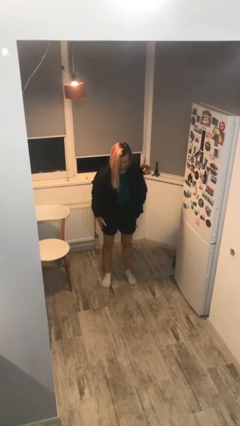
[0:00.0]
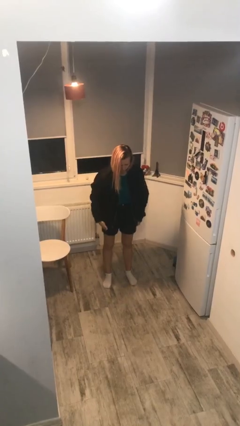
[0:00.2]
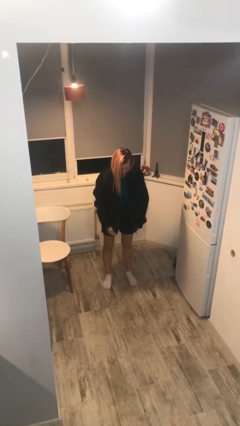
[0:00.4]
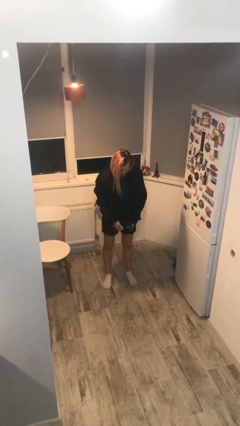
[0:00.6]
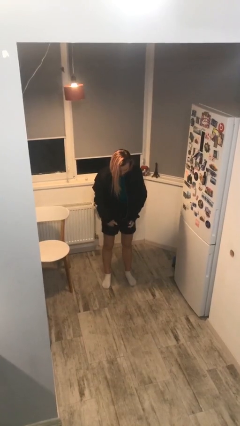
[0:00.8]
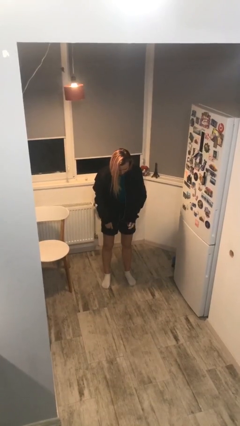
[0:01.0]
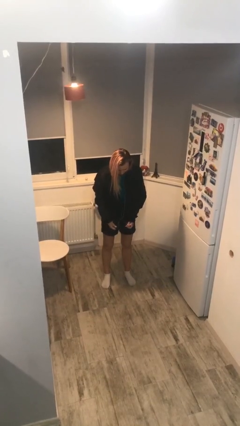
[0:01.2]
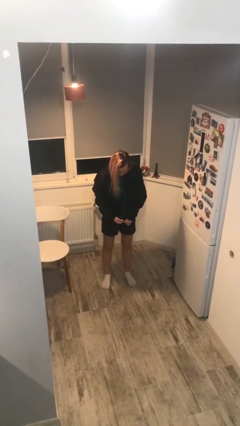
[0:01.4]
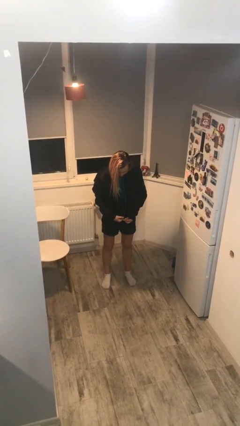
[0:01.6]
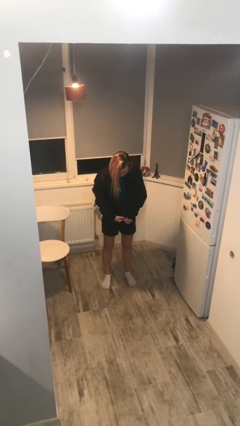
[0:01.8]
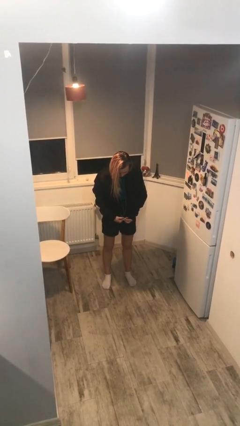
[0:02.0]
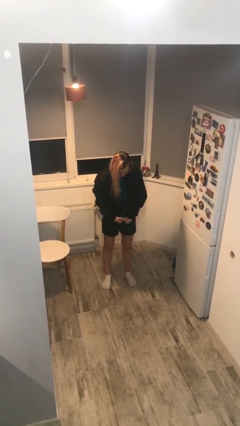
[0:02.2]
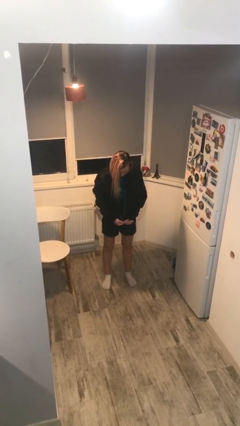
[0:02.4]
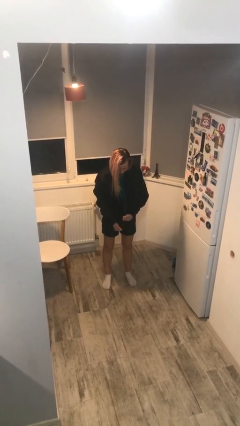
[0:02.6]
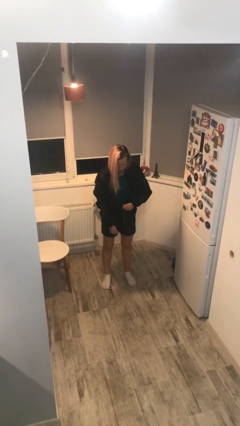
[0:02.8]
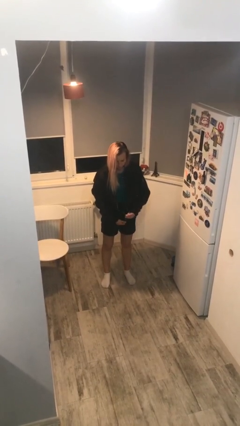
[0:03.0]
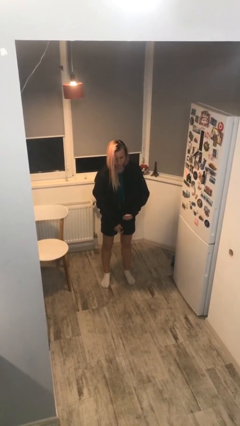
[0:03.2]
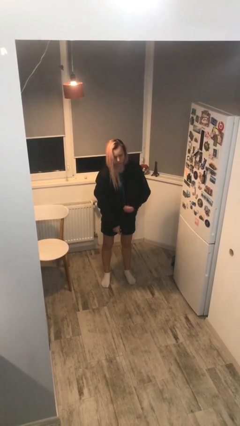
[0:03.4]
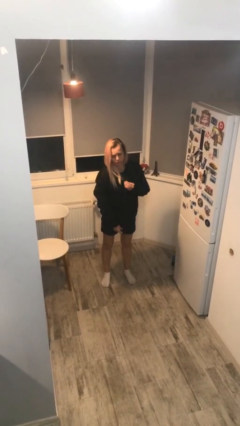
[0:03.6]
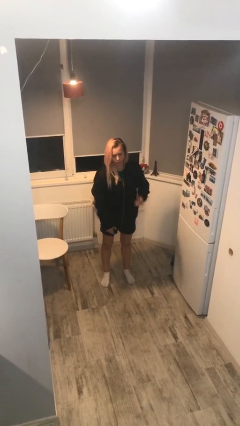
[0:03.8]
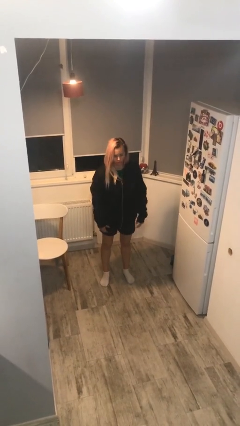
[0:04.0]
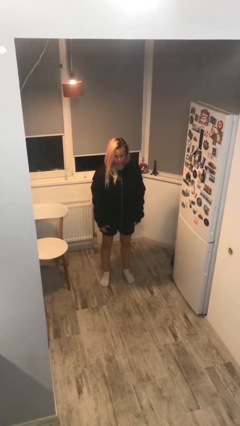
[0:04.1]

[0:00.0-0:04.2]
person zips up jacket

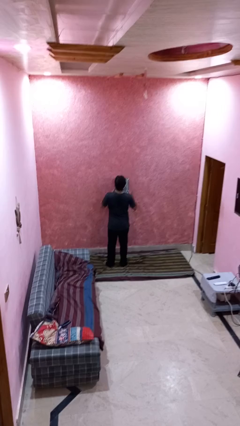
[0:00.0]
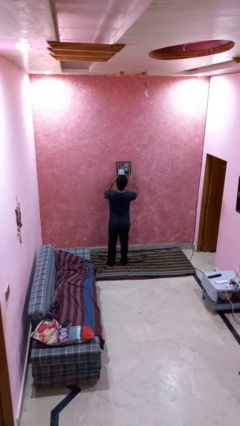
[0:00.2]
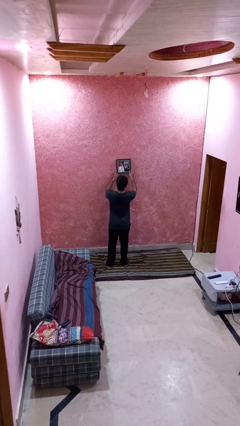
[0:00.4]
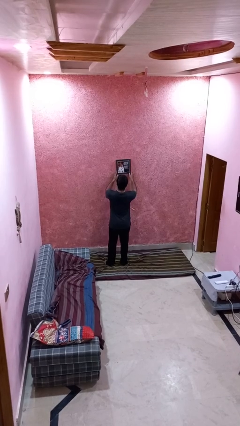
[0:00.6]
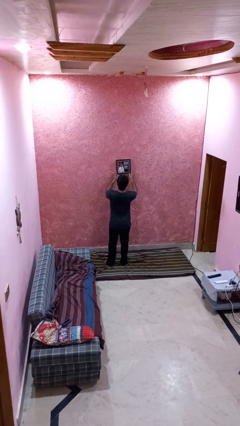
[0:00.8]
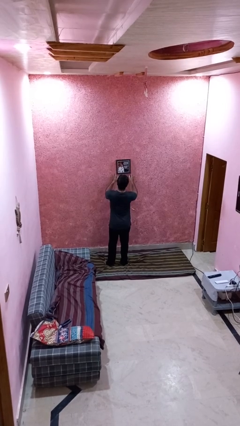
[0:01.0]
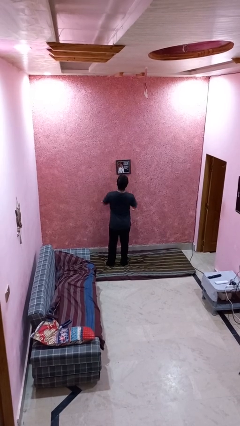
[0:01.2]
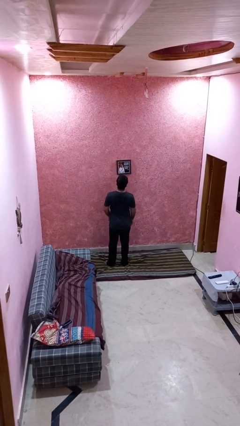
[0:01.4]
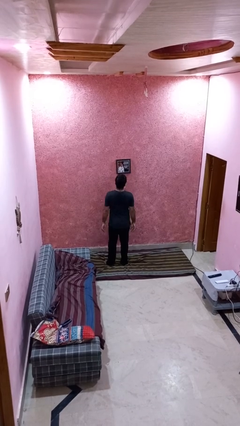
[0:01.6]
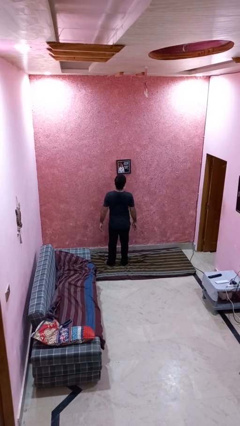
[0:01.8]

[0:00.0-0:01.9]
person puts up picture frame

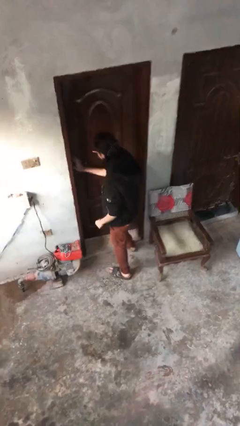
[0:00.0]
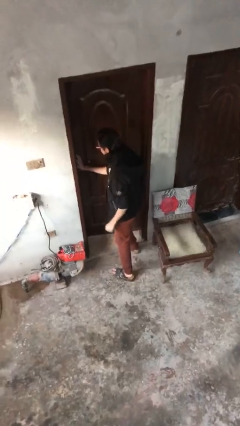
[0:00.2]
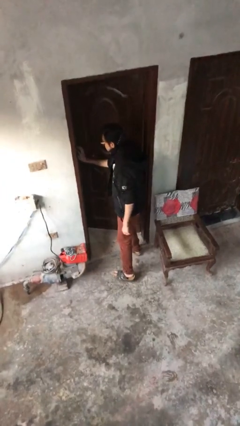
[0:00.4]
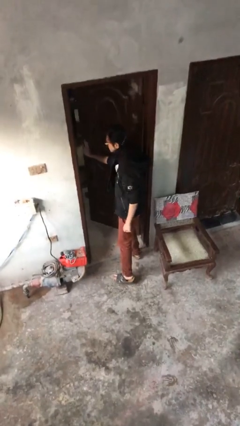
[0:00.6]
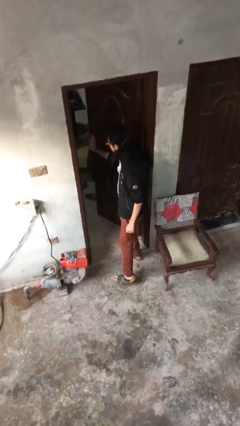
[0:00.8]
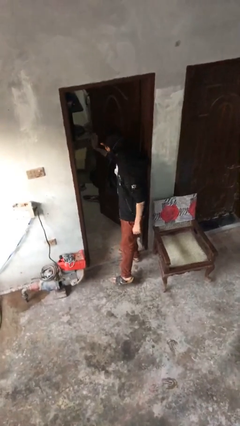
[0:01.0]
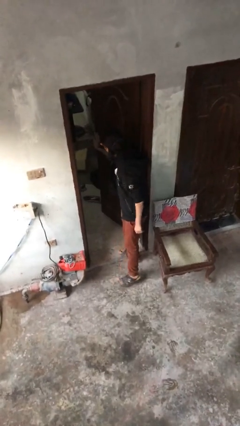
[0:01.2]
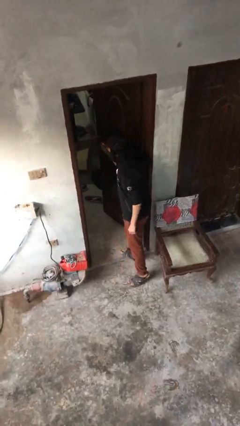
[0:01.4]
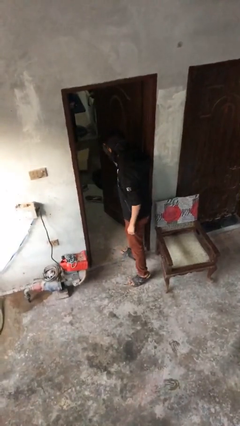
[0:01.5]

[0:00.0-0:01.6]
person opens facility door

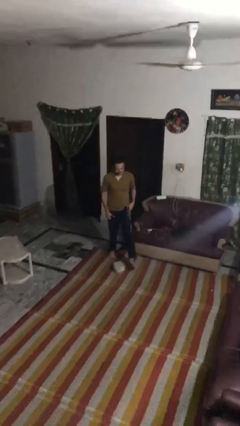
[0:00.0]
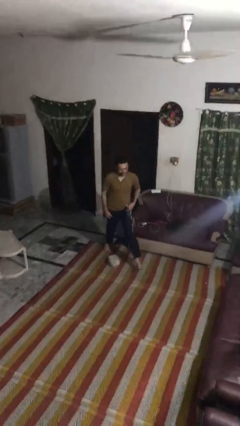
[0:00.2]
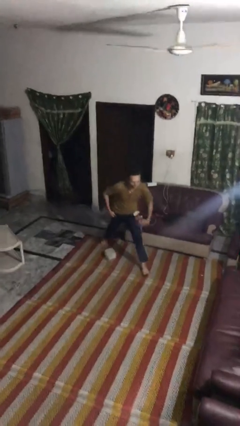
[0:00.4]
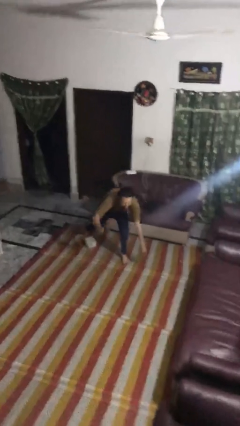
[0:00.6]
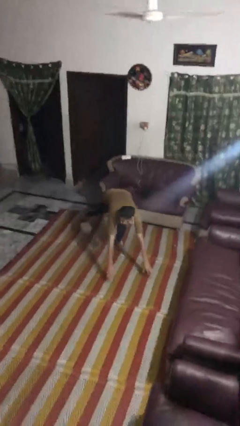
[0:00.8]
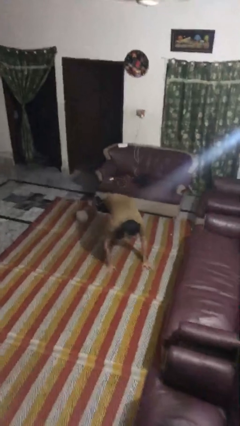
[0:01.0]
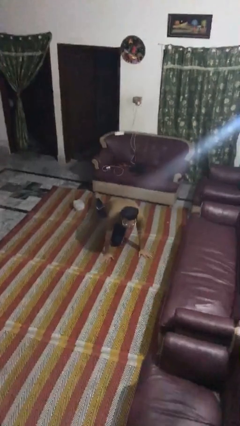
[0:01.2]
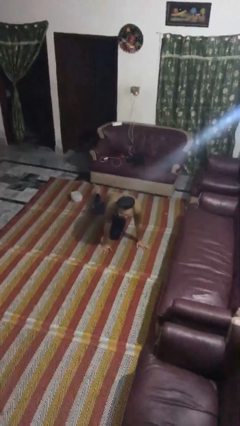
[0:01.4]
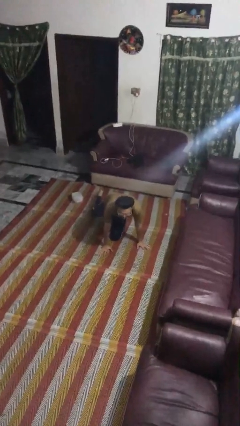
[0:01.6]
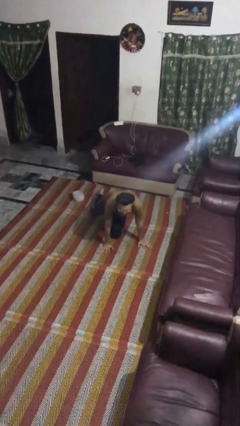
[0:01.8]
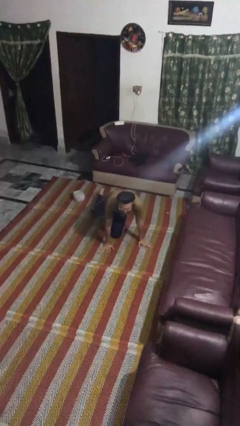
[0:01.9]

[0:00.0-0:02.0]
person trips on object on floor

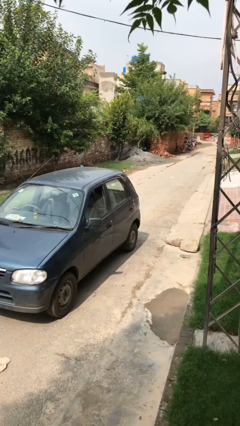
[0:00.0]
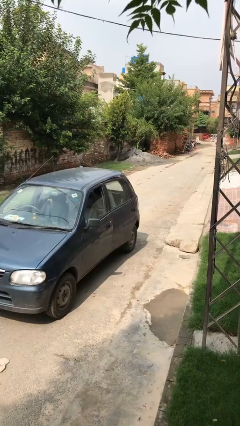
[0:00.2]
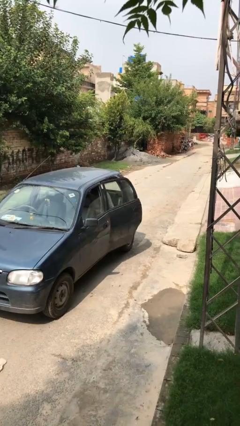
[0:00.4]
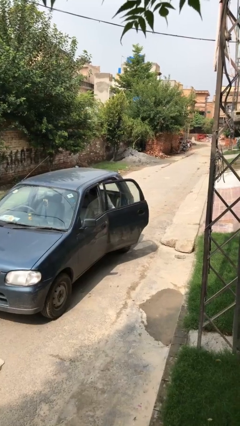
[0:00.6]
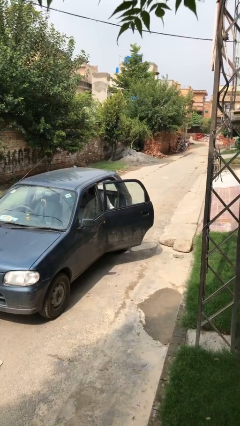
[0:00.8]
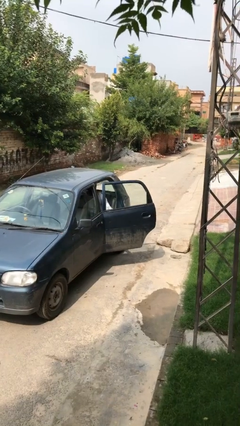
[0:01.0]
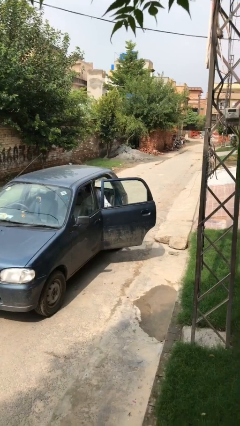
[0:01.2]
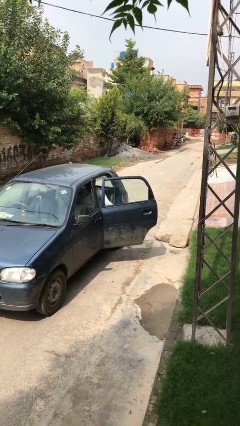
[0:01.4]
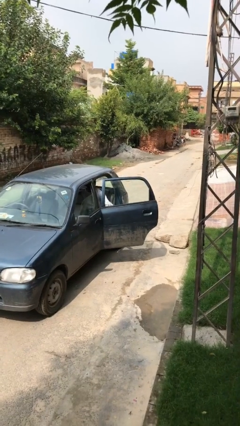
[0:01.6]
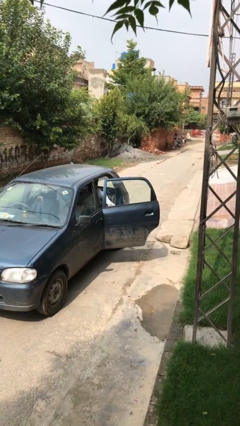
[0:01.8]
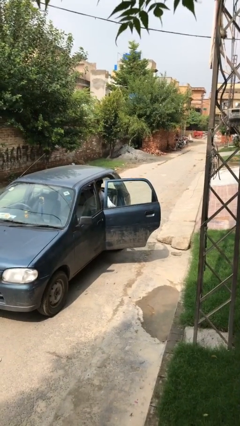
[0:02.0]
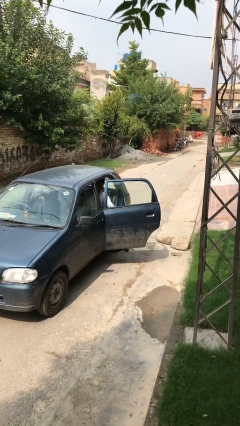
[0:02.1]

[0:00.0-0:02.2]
person opens car door

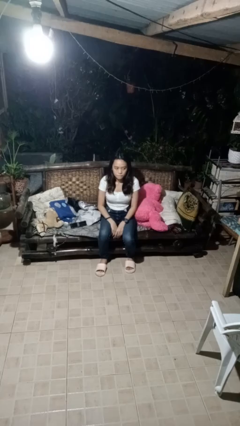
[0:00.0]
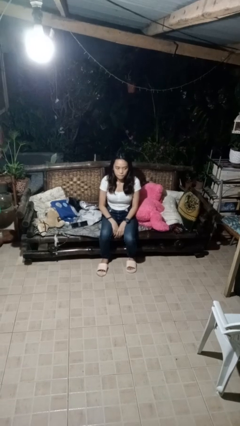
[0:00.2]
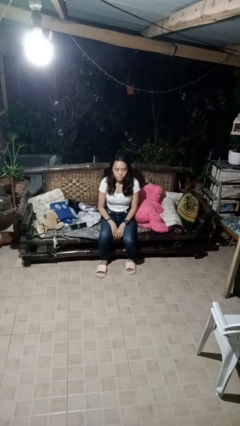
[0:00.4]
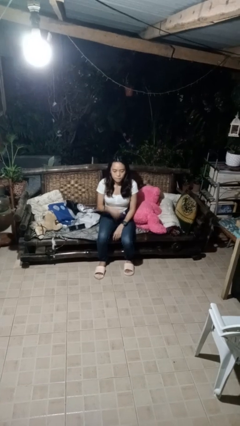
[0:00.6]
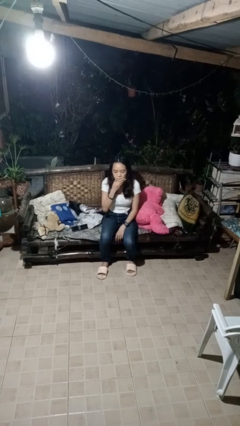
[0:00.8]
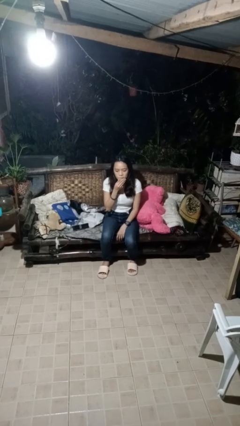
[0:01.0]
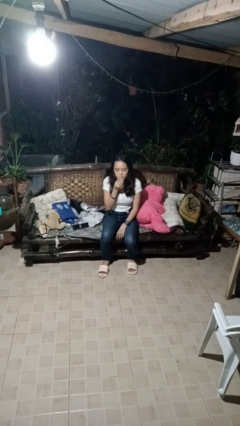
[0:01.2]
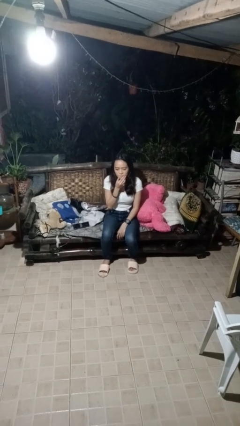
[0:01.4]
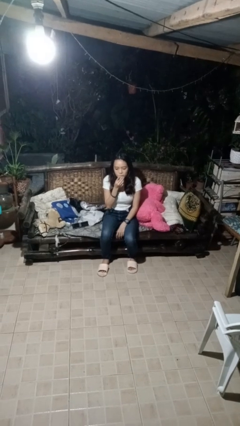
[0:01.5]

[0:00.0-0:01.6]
person strokes chin

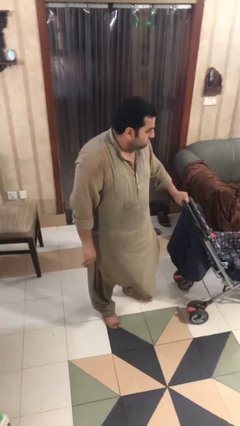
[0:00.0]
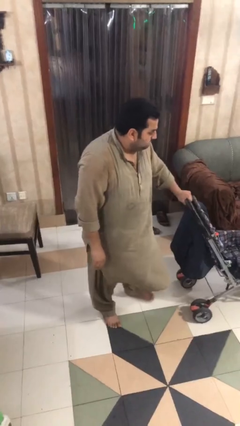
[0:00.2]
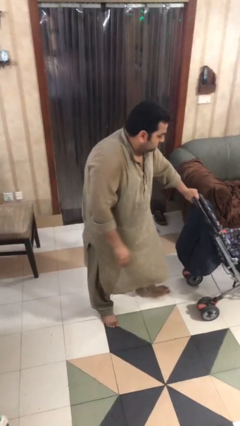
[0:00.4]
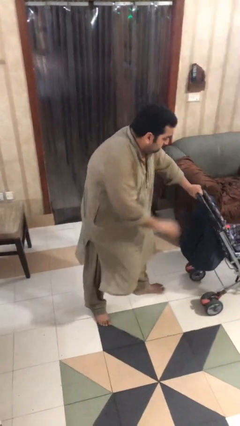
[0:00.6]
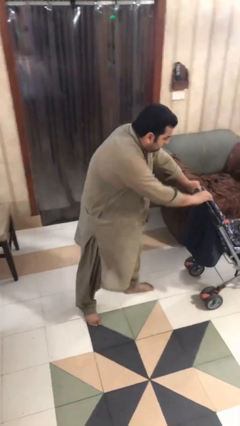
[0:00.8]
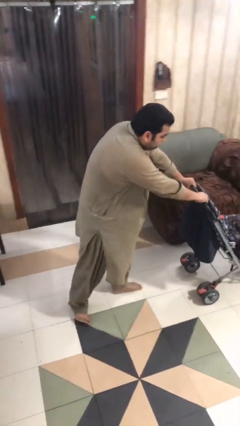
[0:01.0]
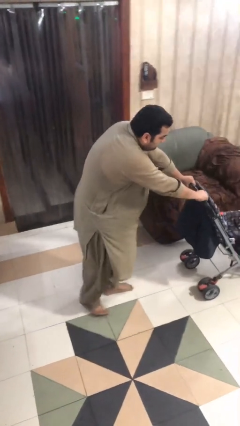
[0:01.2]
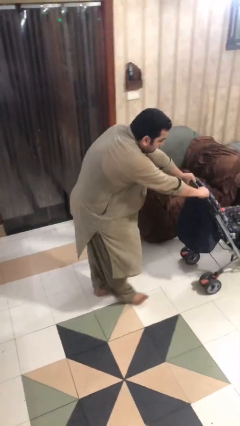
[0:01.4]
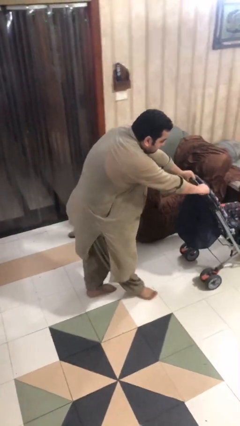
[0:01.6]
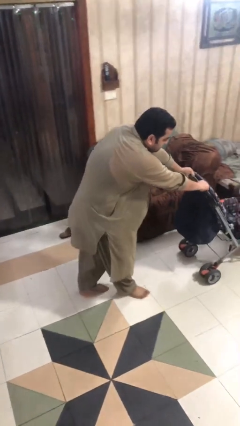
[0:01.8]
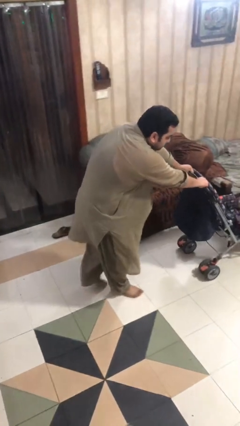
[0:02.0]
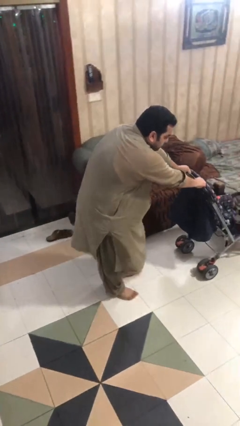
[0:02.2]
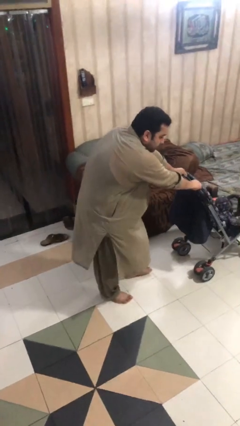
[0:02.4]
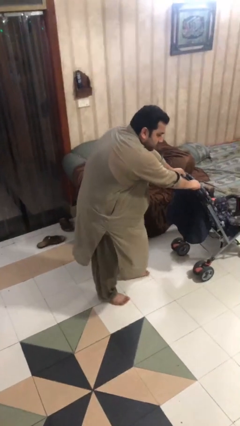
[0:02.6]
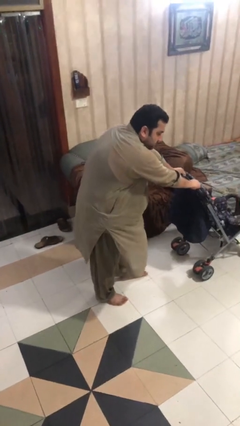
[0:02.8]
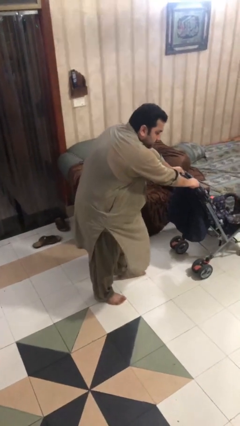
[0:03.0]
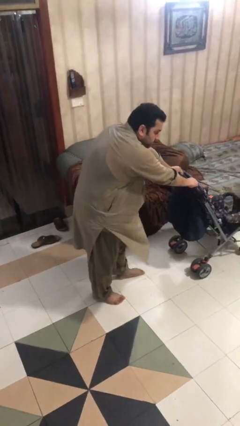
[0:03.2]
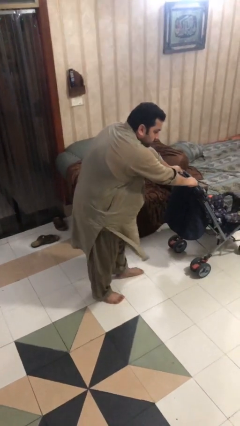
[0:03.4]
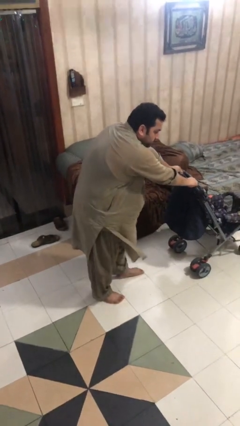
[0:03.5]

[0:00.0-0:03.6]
person pushes wheeled cart
